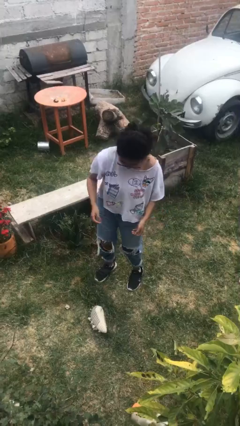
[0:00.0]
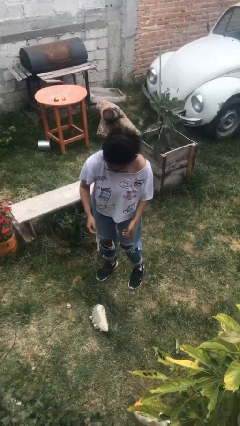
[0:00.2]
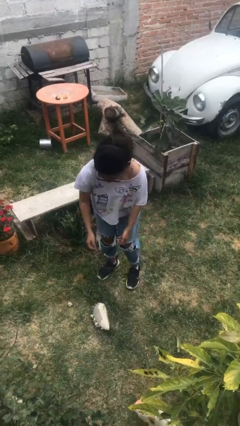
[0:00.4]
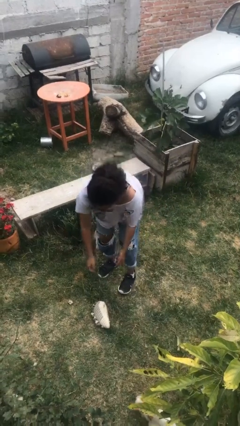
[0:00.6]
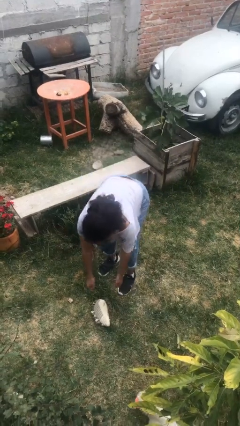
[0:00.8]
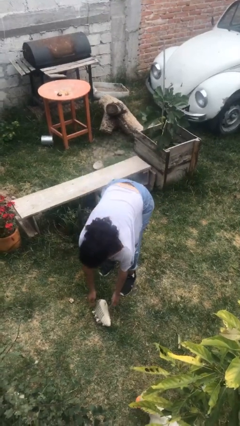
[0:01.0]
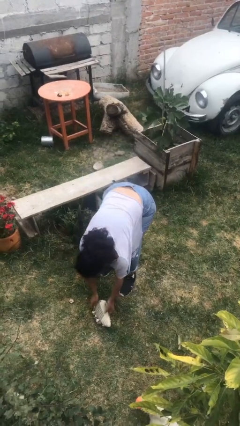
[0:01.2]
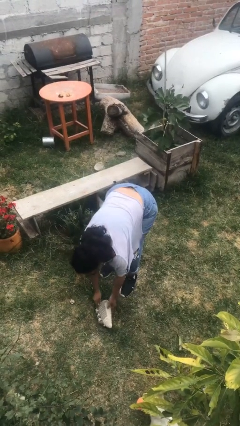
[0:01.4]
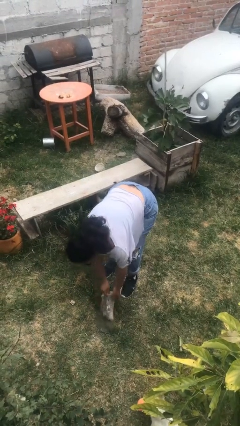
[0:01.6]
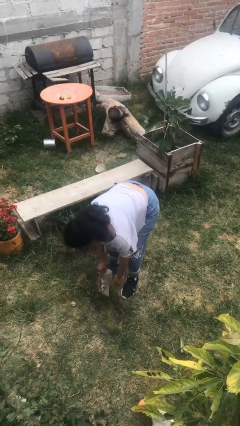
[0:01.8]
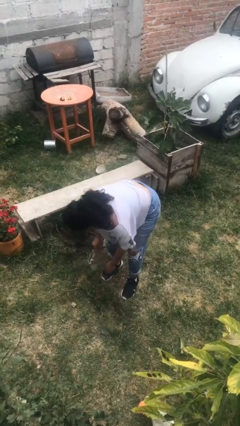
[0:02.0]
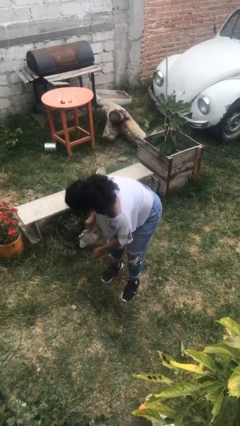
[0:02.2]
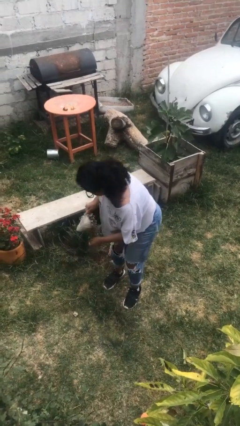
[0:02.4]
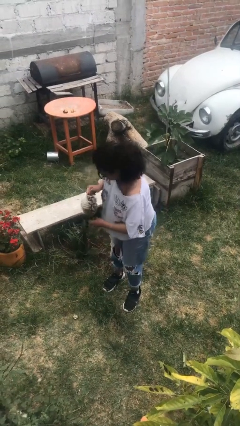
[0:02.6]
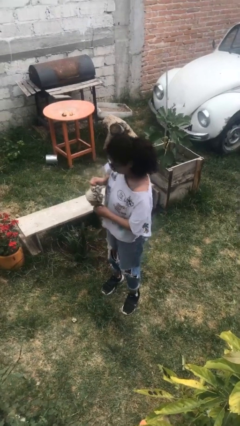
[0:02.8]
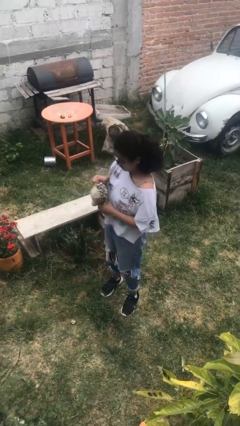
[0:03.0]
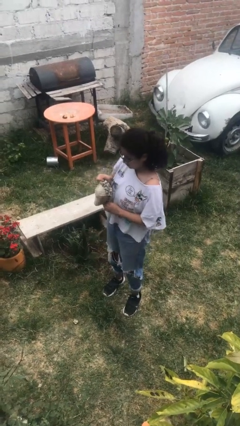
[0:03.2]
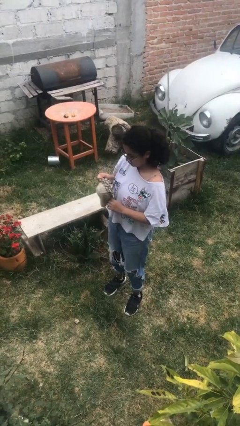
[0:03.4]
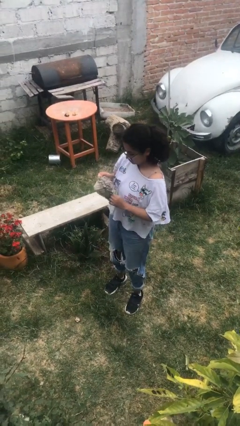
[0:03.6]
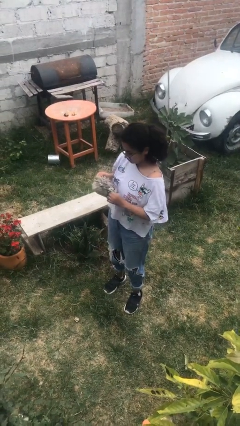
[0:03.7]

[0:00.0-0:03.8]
person picks up object from floor

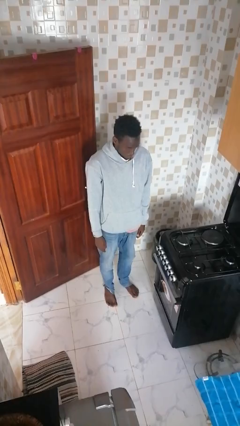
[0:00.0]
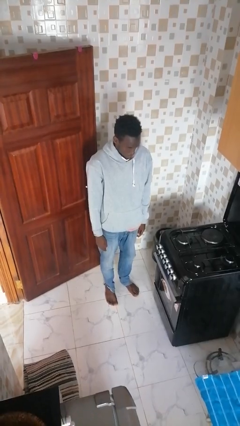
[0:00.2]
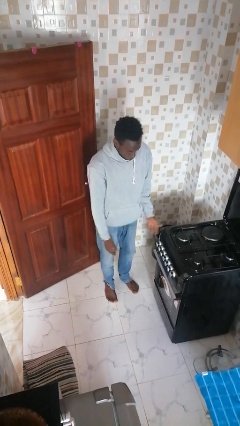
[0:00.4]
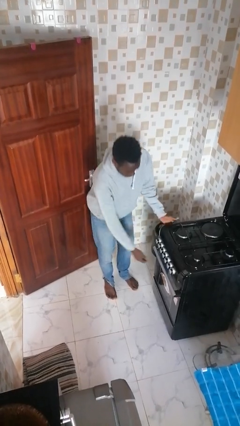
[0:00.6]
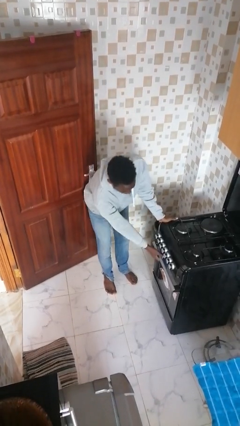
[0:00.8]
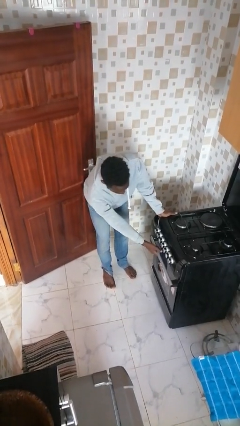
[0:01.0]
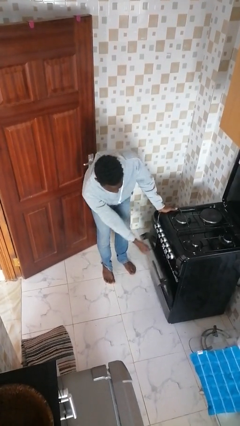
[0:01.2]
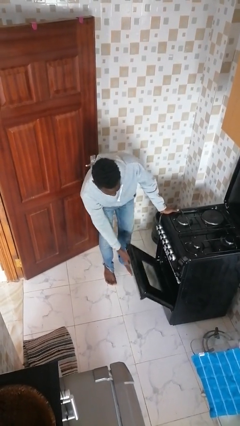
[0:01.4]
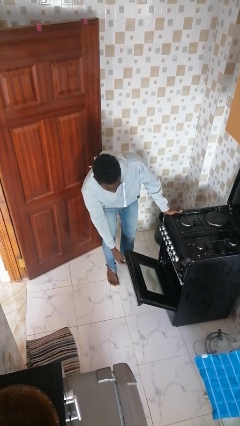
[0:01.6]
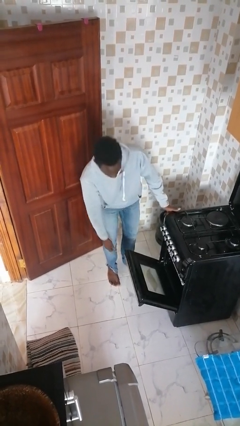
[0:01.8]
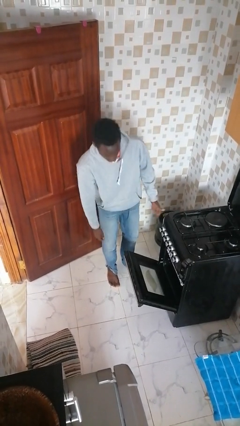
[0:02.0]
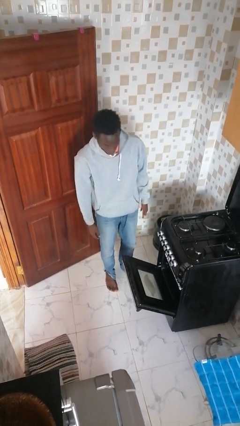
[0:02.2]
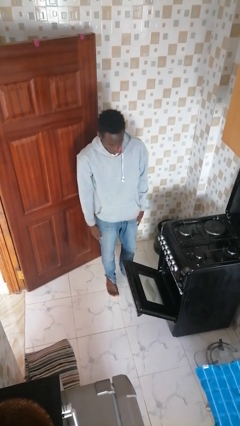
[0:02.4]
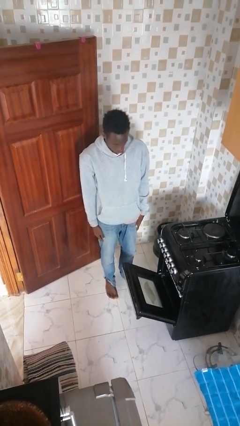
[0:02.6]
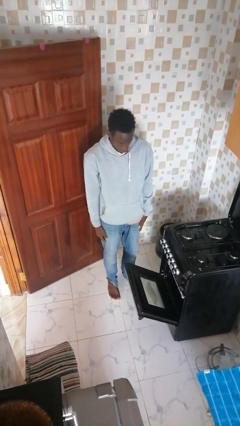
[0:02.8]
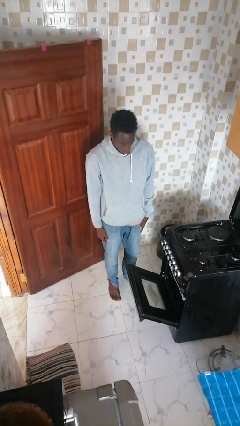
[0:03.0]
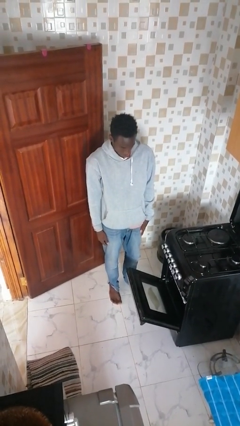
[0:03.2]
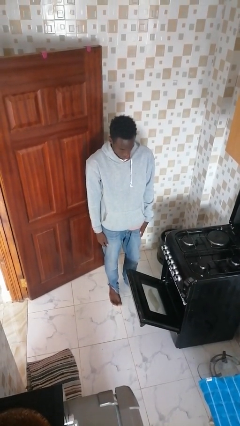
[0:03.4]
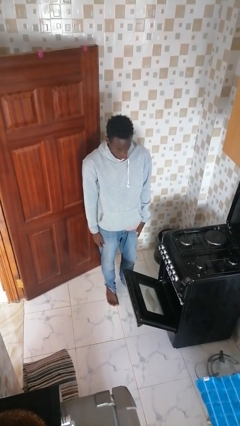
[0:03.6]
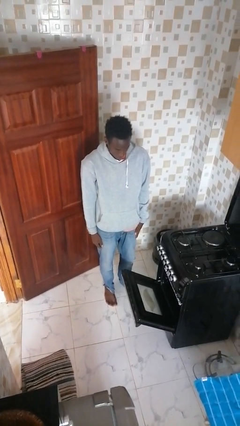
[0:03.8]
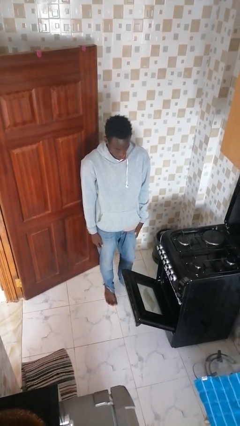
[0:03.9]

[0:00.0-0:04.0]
person opens oven door

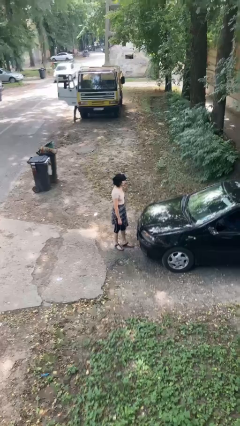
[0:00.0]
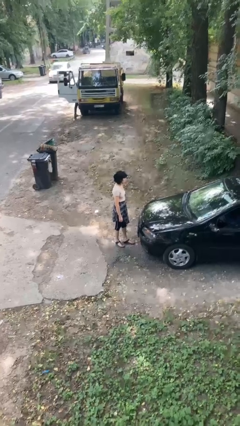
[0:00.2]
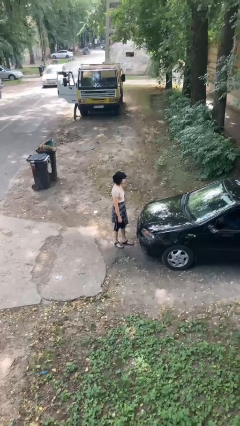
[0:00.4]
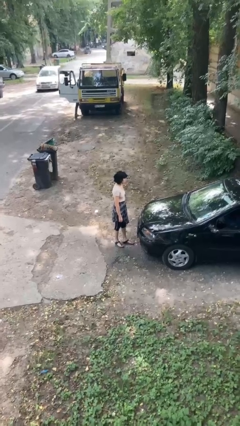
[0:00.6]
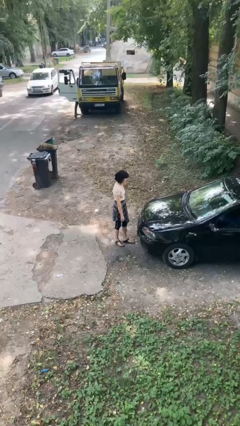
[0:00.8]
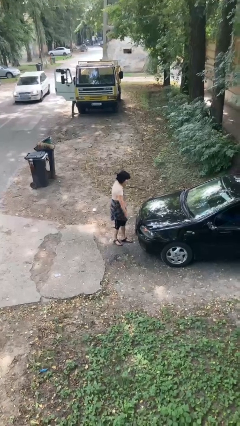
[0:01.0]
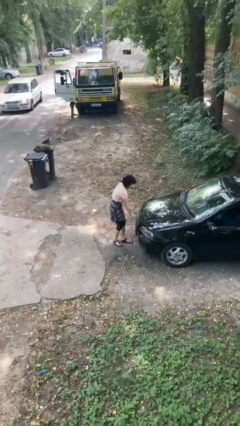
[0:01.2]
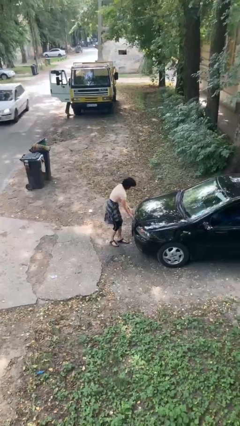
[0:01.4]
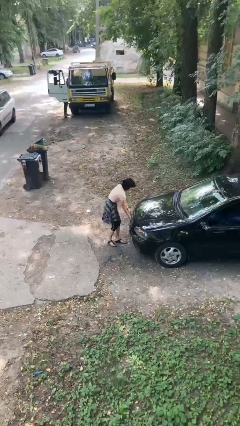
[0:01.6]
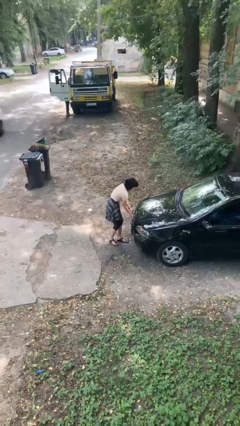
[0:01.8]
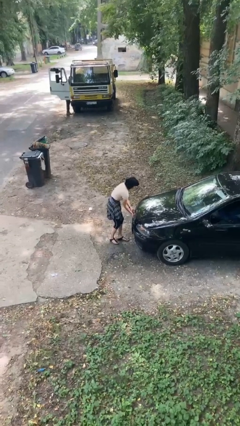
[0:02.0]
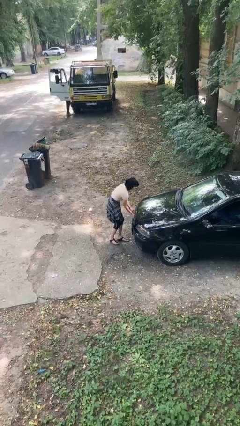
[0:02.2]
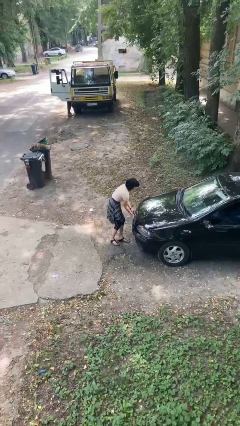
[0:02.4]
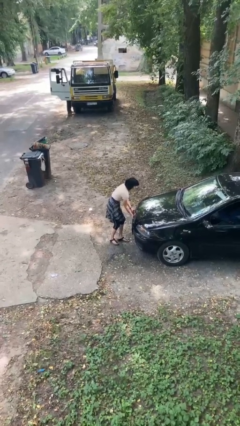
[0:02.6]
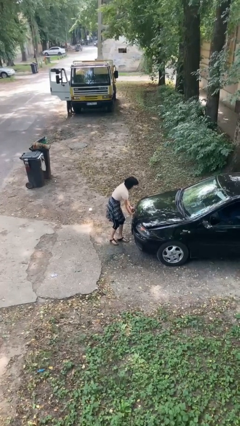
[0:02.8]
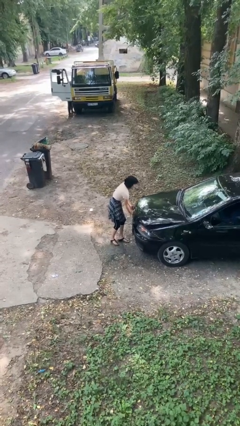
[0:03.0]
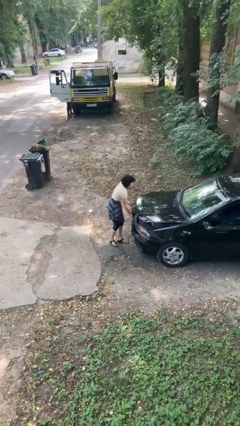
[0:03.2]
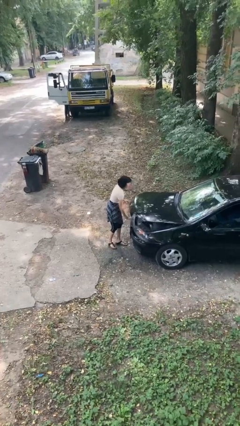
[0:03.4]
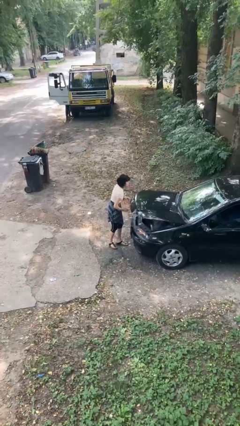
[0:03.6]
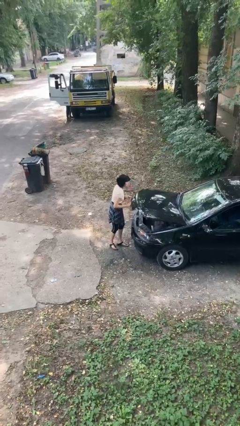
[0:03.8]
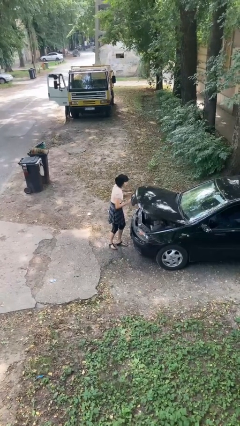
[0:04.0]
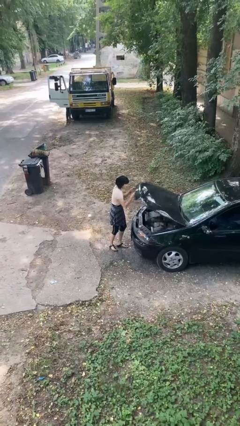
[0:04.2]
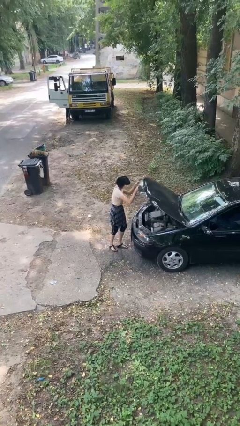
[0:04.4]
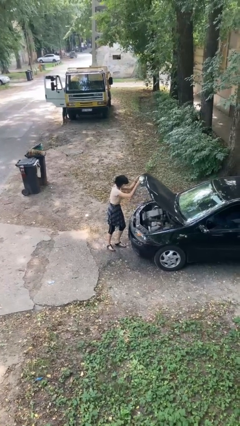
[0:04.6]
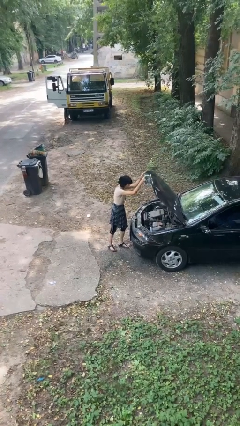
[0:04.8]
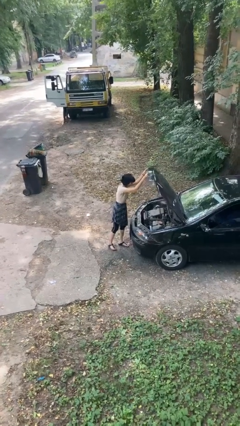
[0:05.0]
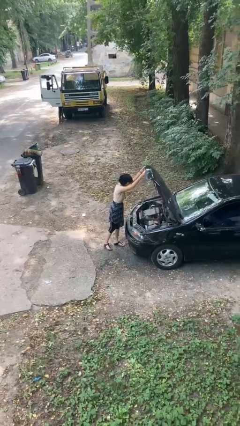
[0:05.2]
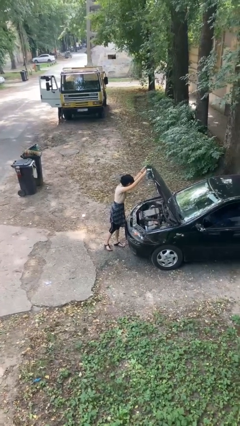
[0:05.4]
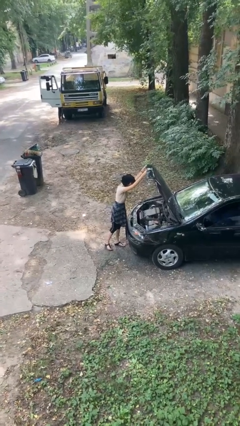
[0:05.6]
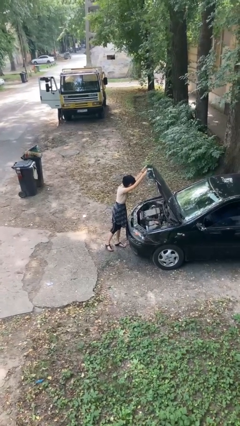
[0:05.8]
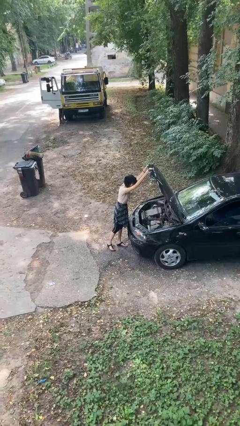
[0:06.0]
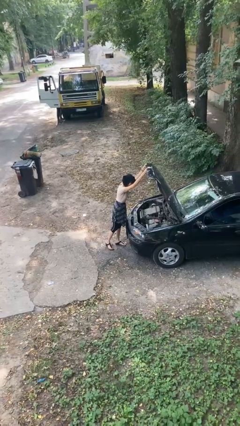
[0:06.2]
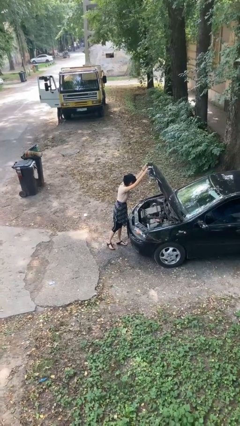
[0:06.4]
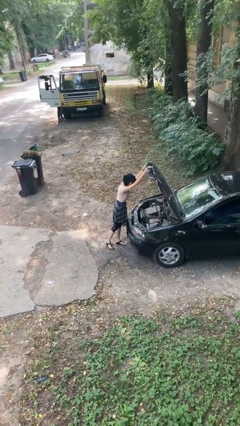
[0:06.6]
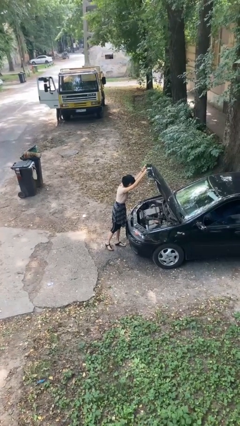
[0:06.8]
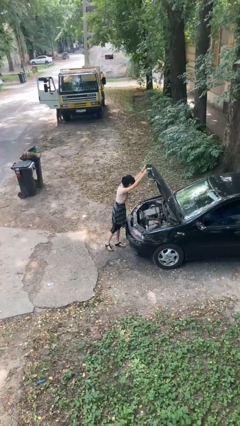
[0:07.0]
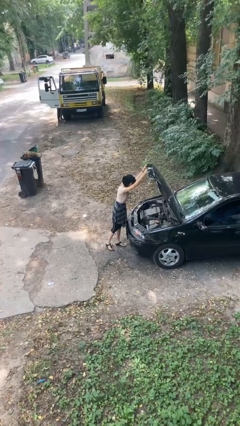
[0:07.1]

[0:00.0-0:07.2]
person opens car hood

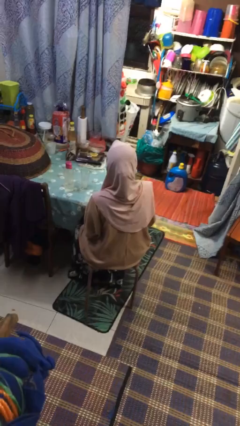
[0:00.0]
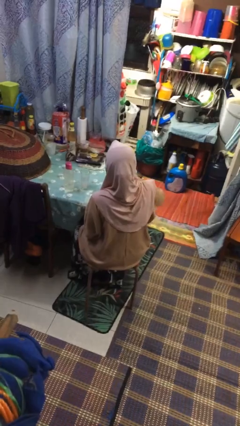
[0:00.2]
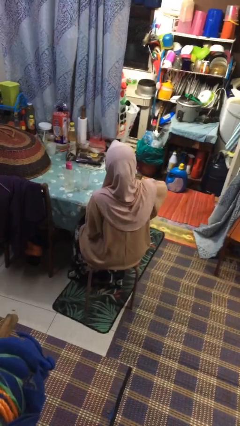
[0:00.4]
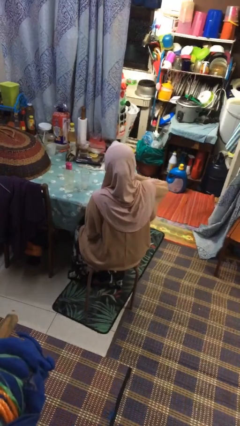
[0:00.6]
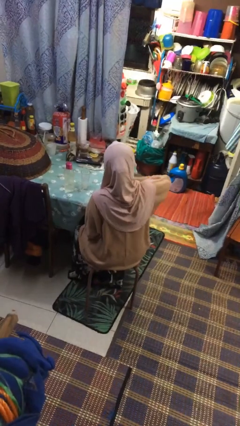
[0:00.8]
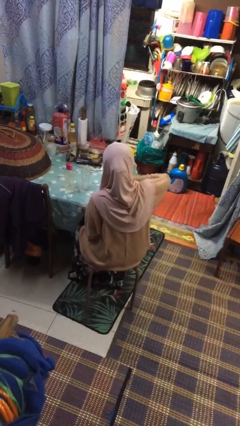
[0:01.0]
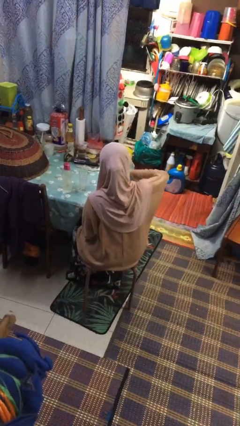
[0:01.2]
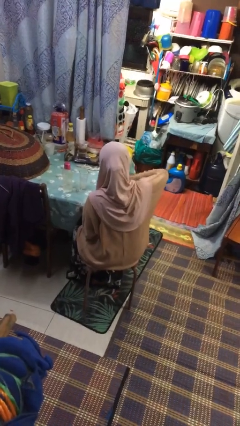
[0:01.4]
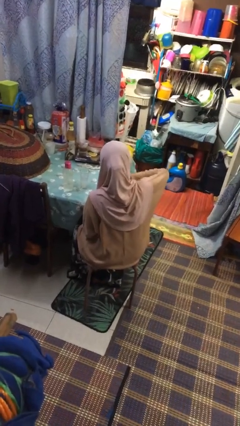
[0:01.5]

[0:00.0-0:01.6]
person drums on chest

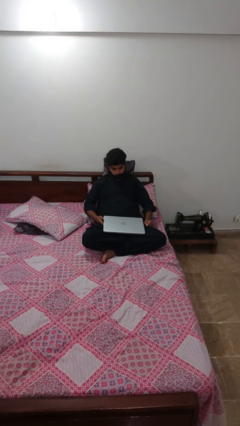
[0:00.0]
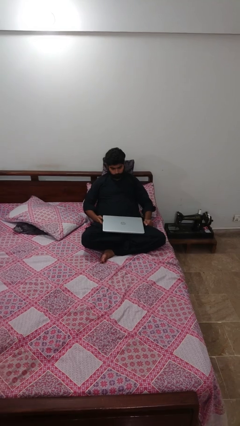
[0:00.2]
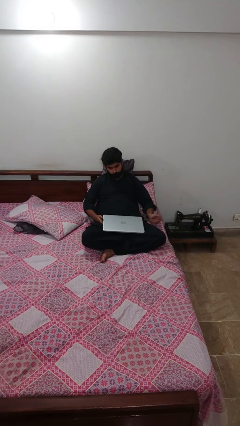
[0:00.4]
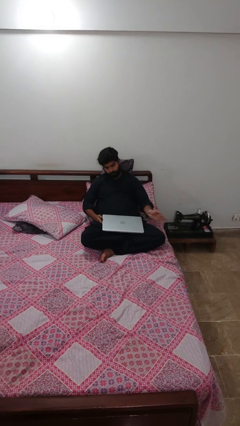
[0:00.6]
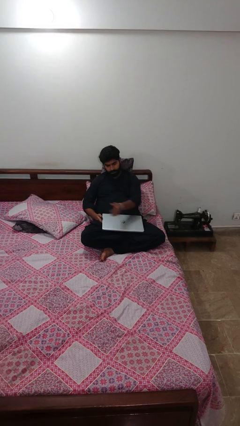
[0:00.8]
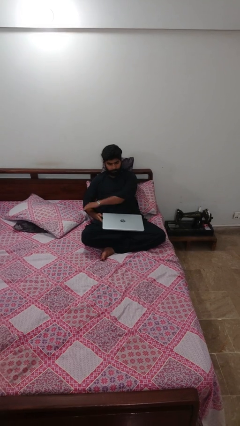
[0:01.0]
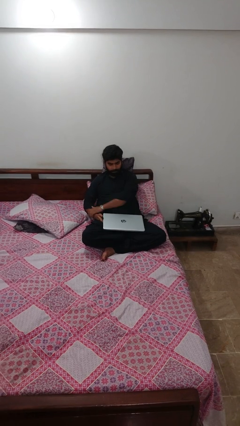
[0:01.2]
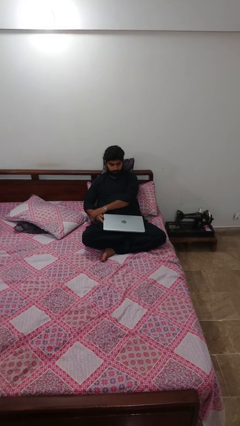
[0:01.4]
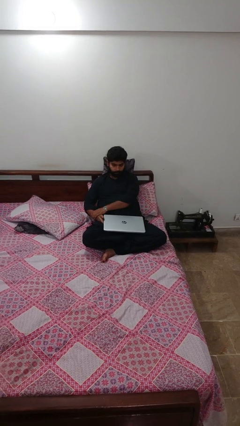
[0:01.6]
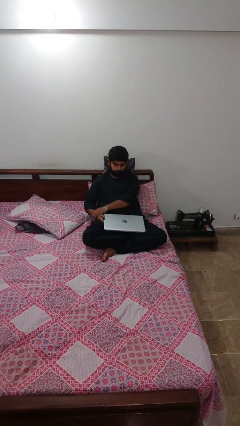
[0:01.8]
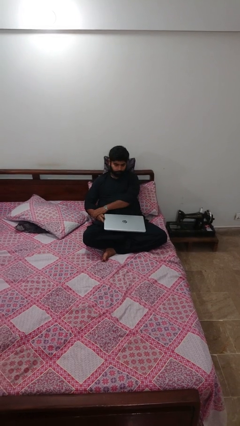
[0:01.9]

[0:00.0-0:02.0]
person waves hand over object
